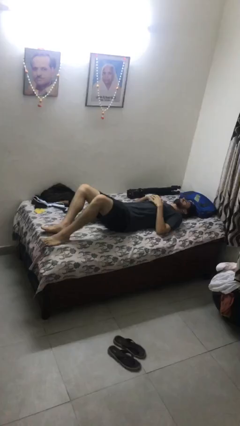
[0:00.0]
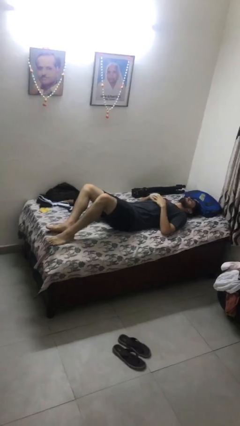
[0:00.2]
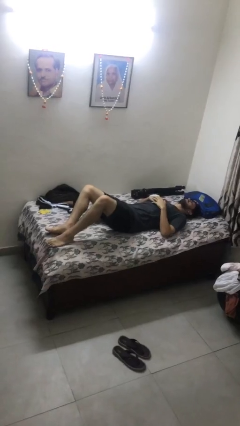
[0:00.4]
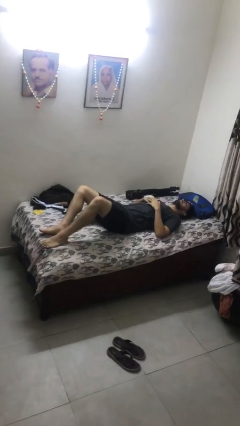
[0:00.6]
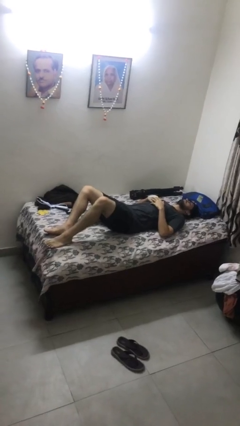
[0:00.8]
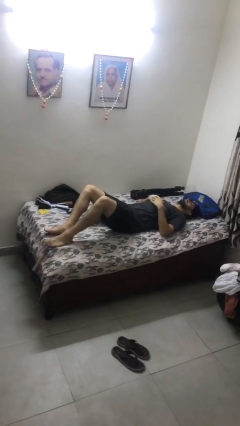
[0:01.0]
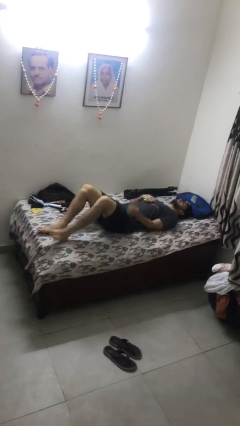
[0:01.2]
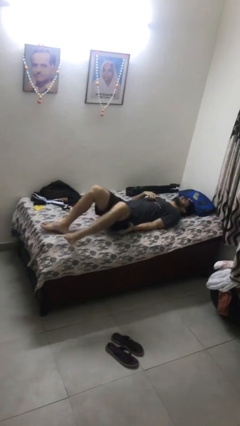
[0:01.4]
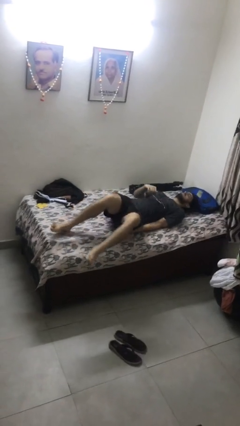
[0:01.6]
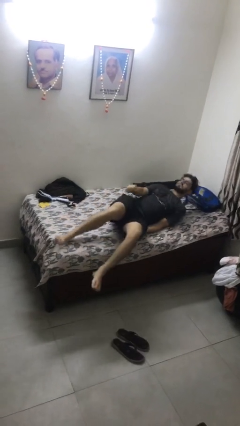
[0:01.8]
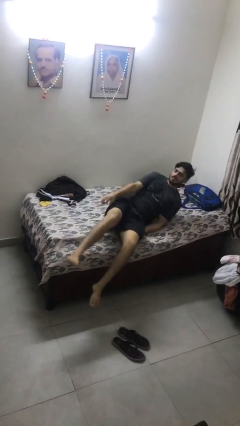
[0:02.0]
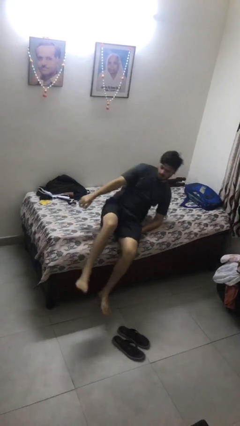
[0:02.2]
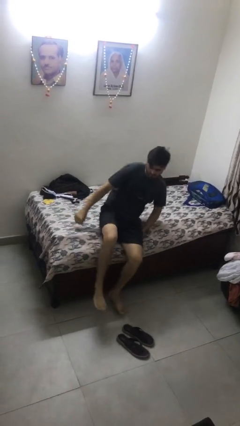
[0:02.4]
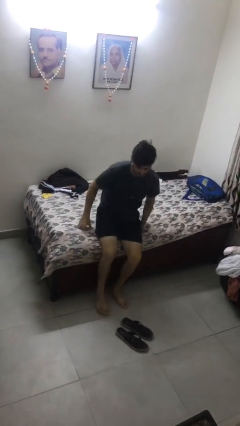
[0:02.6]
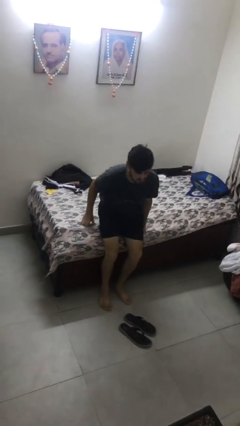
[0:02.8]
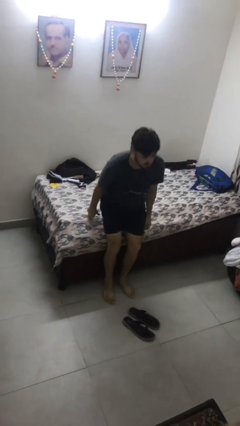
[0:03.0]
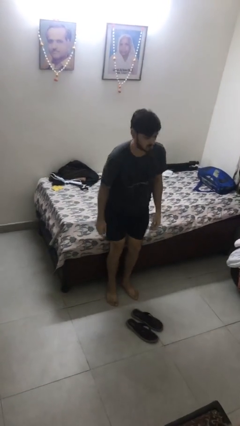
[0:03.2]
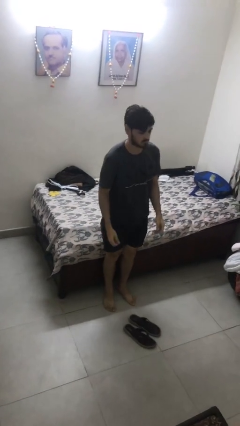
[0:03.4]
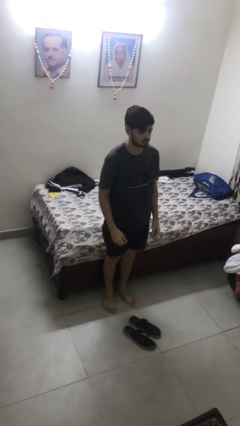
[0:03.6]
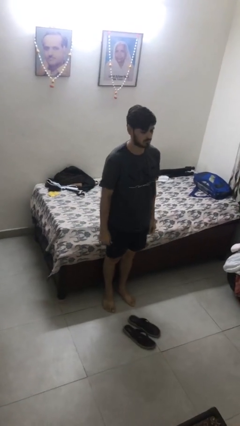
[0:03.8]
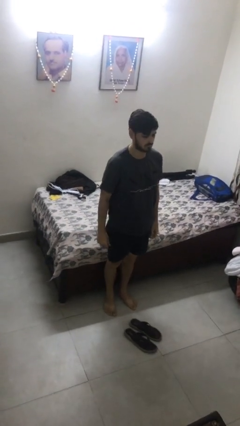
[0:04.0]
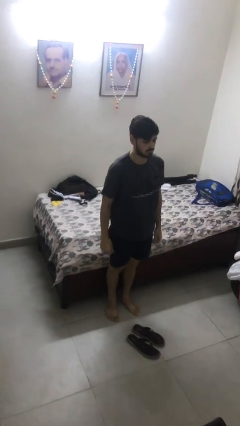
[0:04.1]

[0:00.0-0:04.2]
person stands up

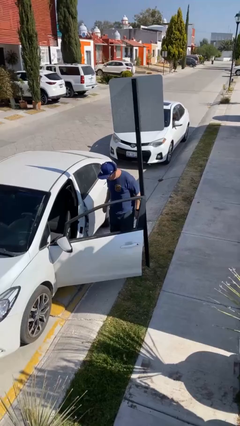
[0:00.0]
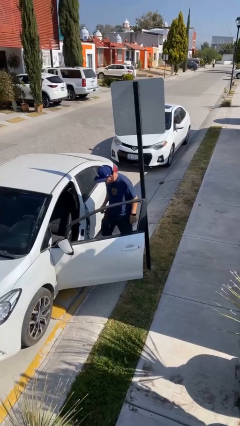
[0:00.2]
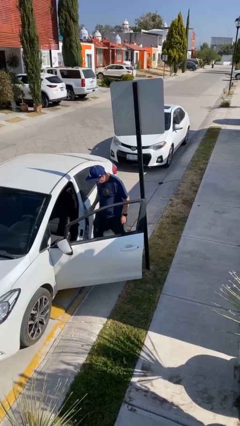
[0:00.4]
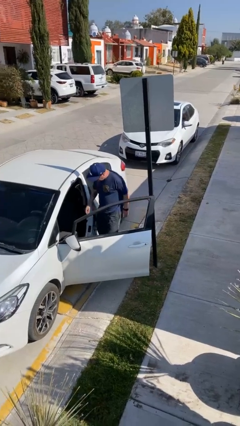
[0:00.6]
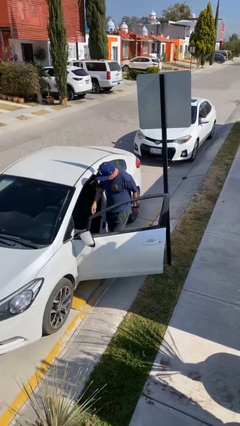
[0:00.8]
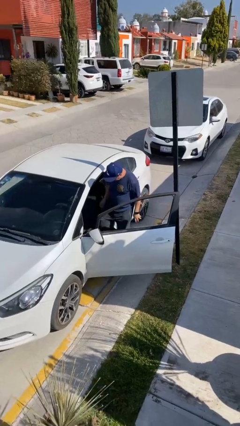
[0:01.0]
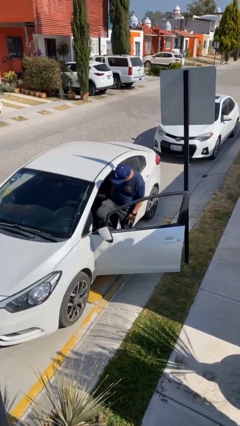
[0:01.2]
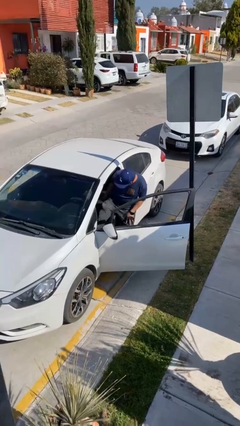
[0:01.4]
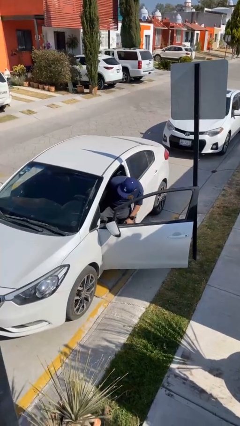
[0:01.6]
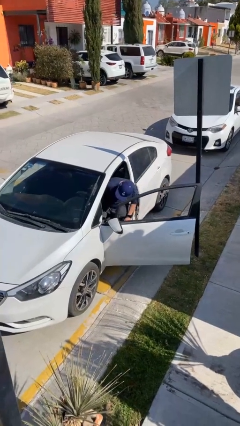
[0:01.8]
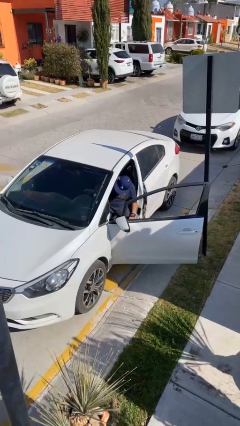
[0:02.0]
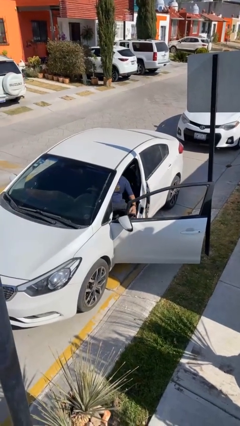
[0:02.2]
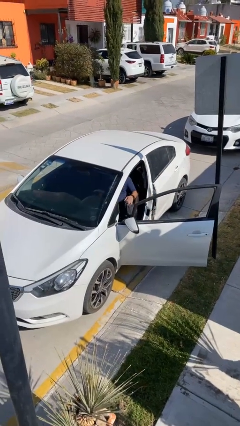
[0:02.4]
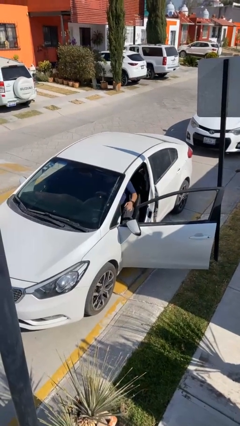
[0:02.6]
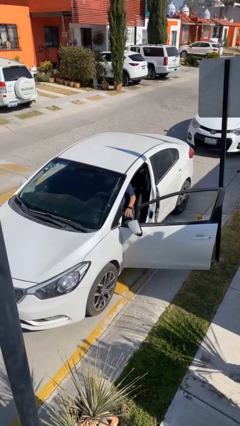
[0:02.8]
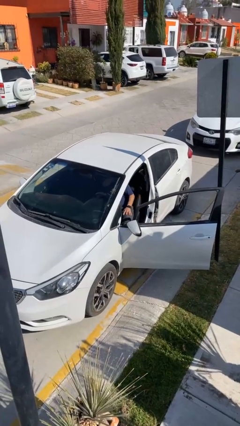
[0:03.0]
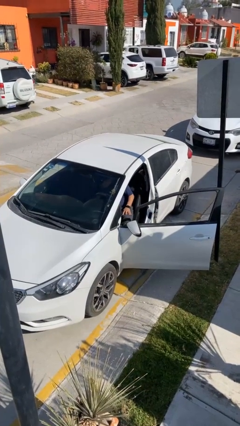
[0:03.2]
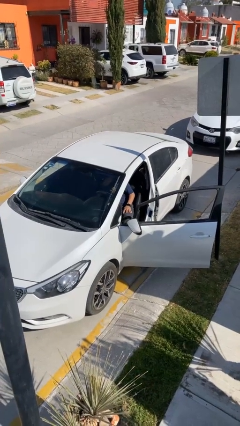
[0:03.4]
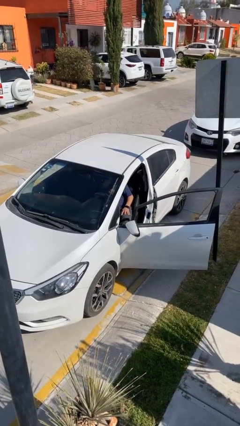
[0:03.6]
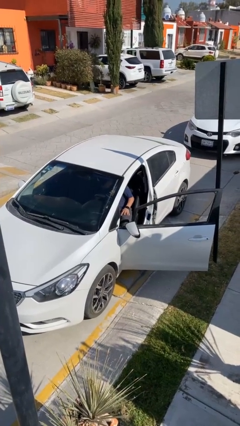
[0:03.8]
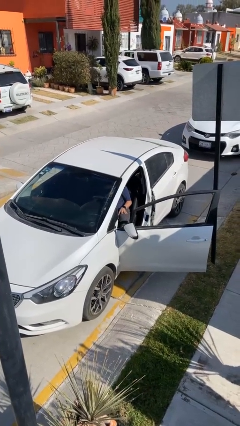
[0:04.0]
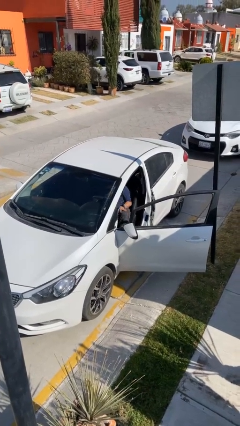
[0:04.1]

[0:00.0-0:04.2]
person enters car

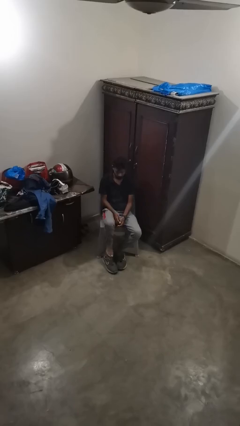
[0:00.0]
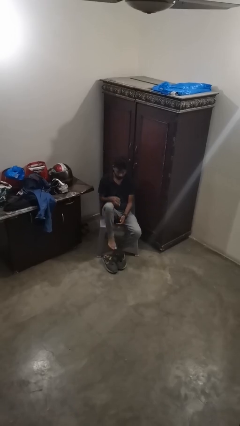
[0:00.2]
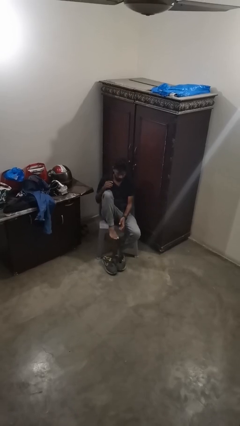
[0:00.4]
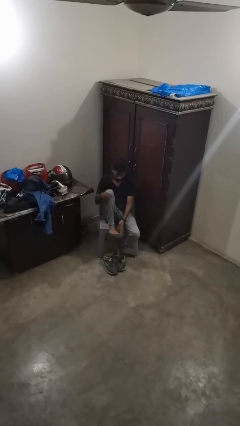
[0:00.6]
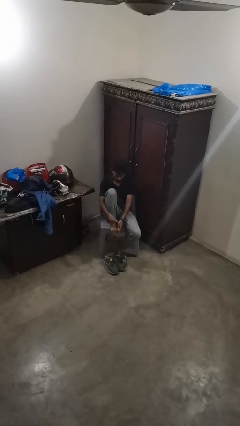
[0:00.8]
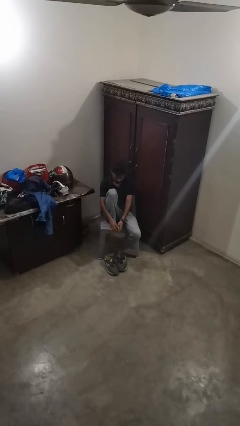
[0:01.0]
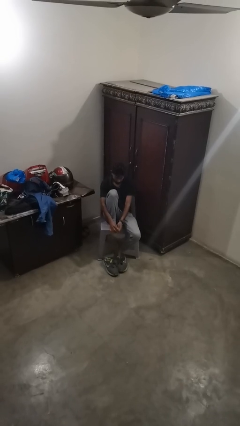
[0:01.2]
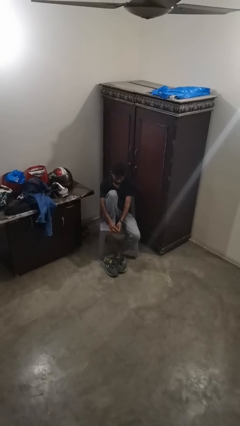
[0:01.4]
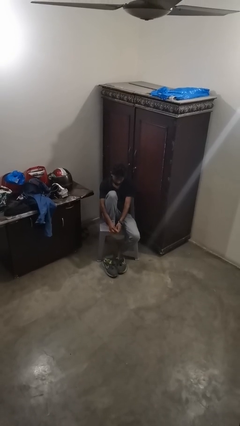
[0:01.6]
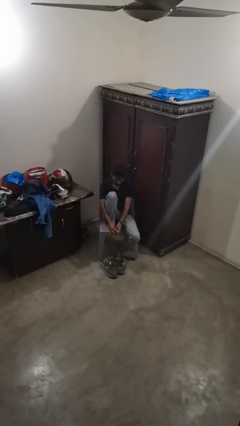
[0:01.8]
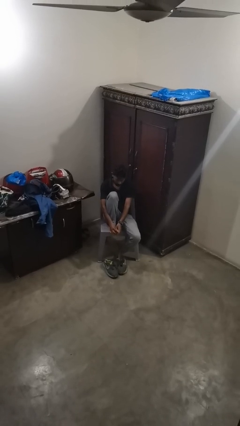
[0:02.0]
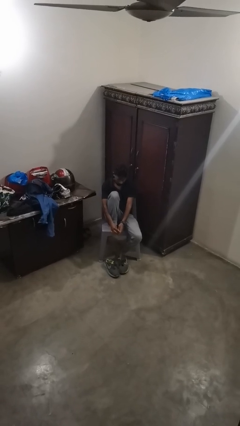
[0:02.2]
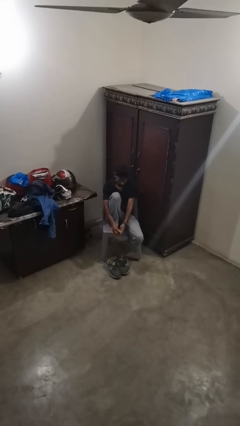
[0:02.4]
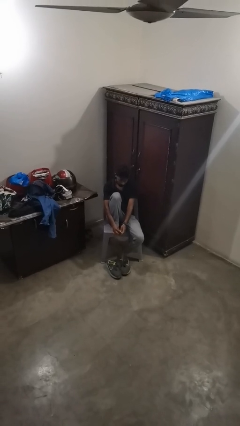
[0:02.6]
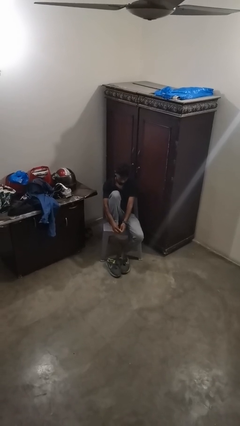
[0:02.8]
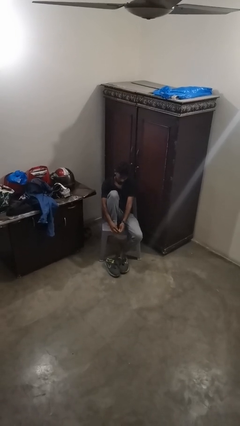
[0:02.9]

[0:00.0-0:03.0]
person rubs foot

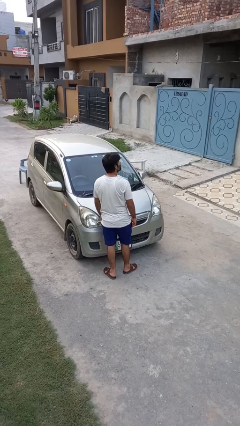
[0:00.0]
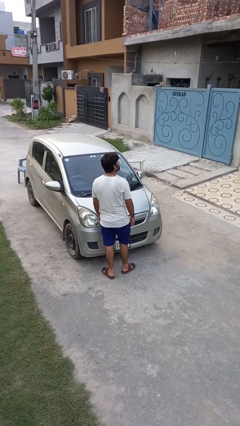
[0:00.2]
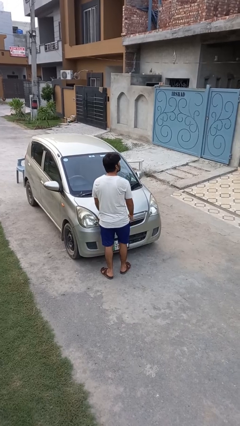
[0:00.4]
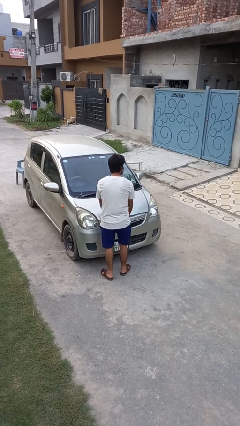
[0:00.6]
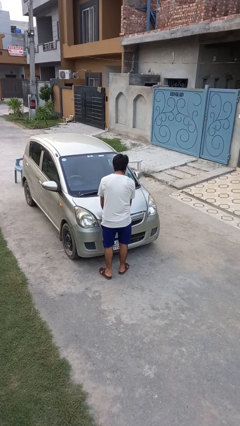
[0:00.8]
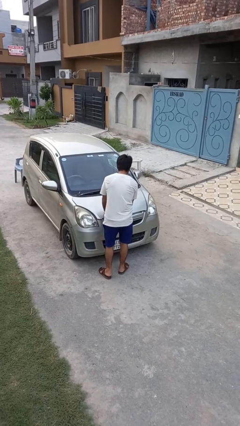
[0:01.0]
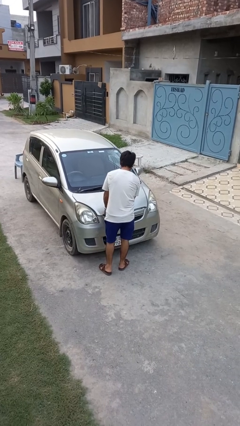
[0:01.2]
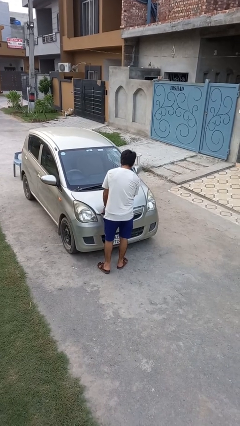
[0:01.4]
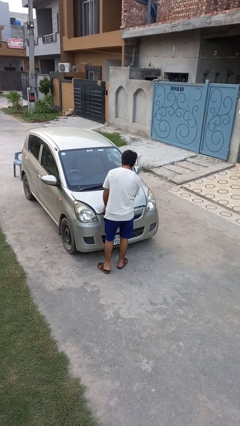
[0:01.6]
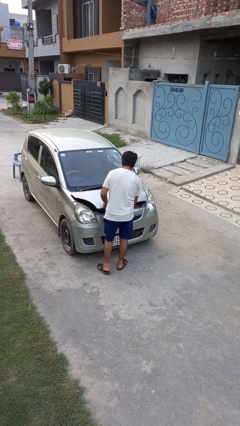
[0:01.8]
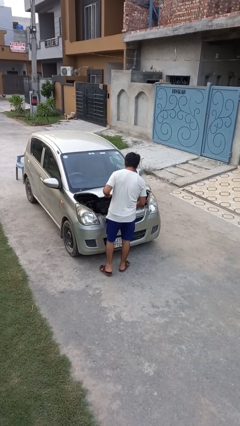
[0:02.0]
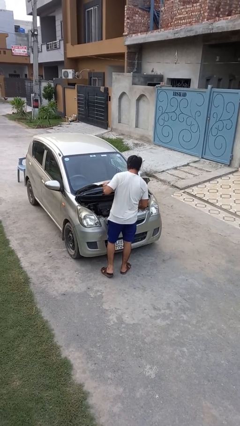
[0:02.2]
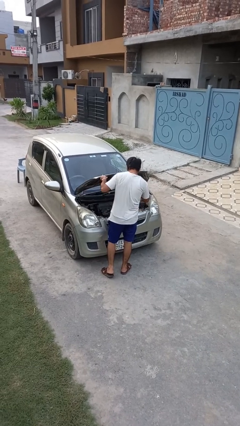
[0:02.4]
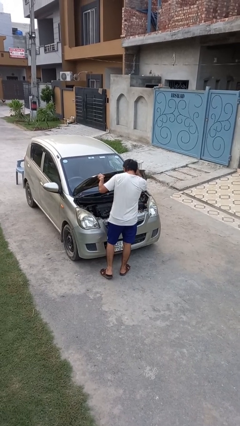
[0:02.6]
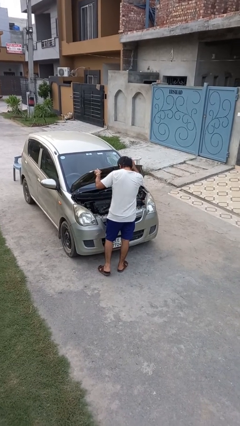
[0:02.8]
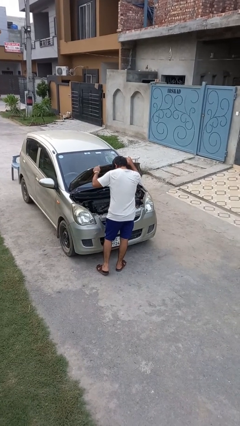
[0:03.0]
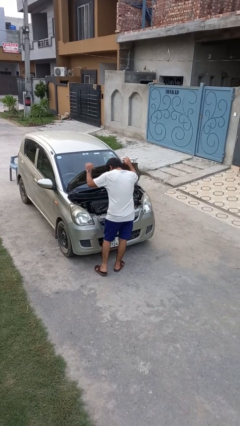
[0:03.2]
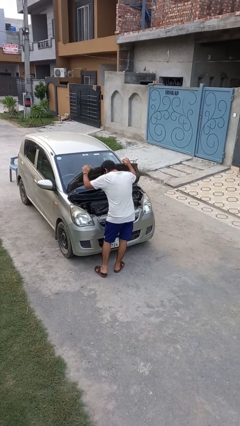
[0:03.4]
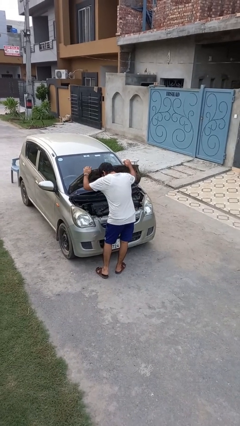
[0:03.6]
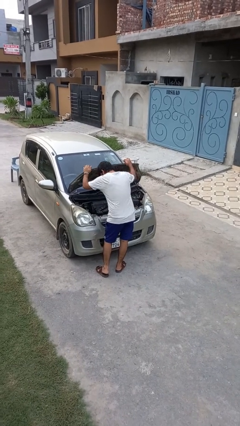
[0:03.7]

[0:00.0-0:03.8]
person opens car hood

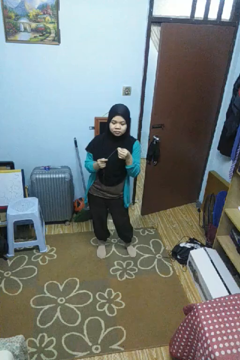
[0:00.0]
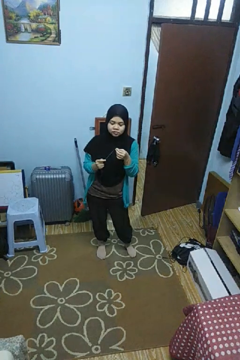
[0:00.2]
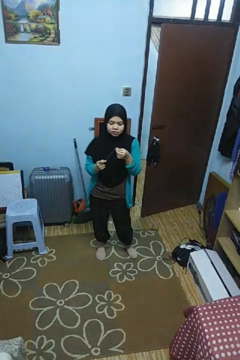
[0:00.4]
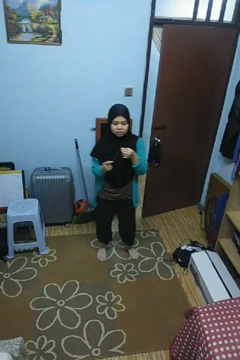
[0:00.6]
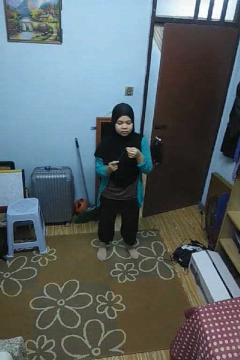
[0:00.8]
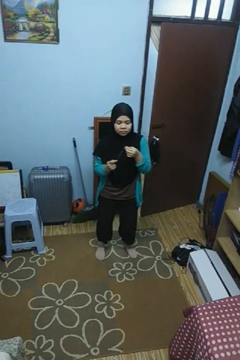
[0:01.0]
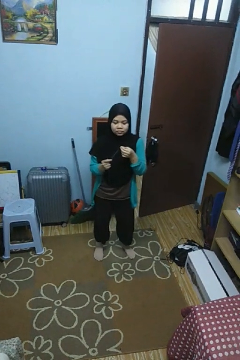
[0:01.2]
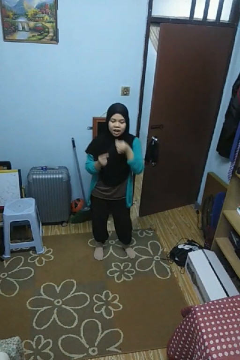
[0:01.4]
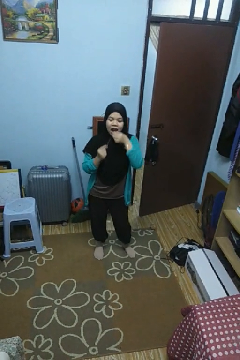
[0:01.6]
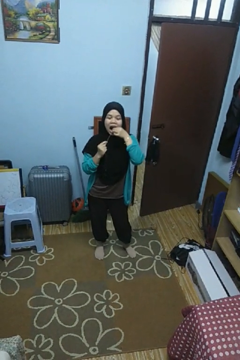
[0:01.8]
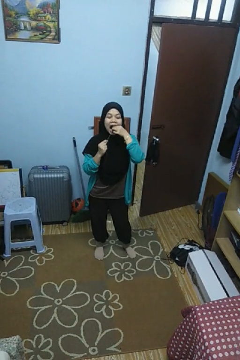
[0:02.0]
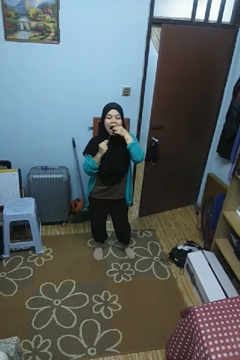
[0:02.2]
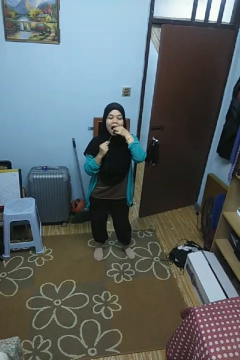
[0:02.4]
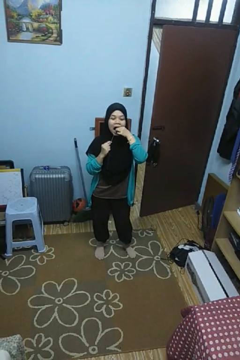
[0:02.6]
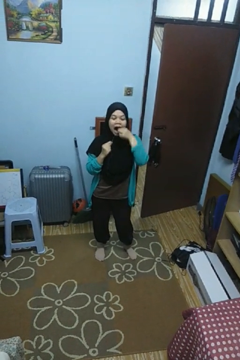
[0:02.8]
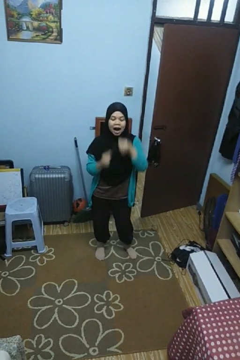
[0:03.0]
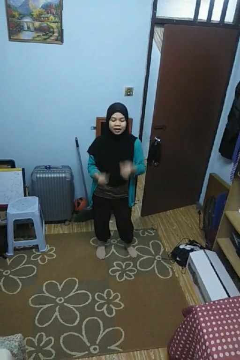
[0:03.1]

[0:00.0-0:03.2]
person flosses
